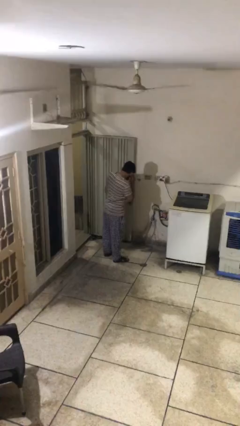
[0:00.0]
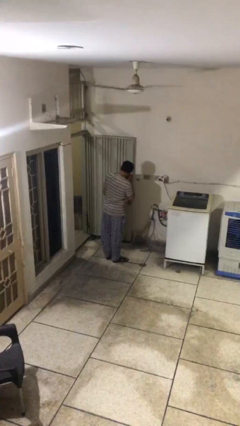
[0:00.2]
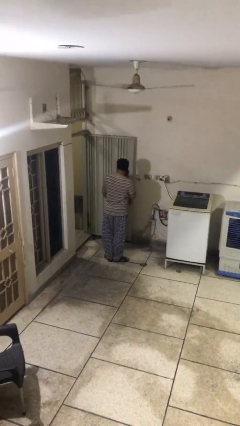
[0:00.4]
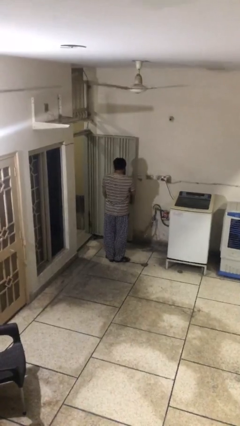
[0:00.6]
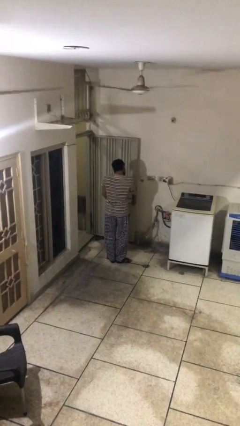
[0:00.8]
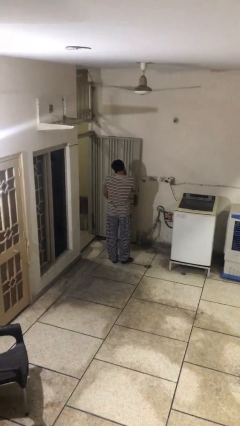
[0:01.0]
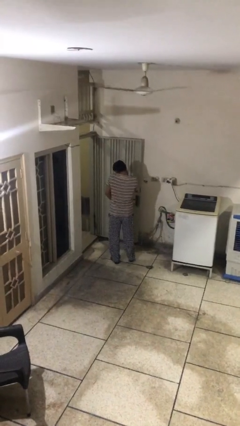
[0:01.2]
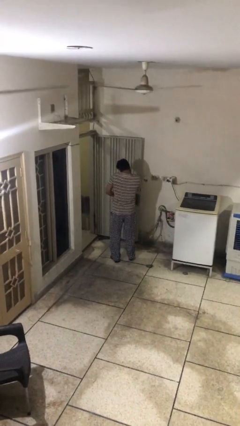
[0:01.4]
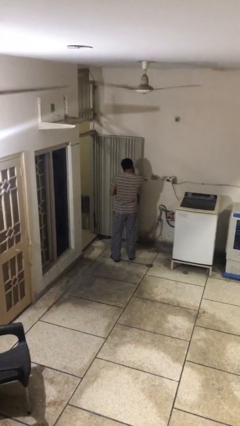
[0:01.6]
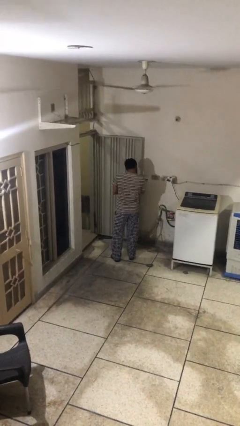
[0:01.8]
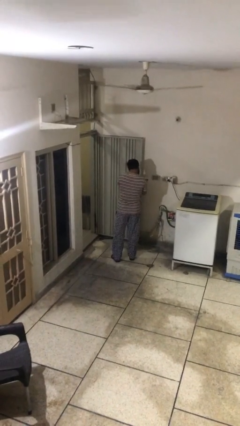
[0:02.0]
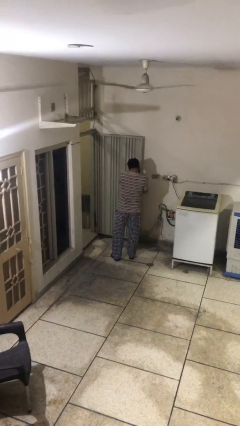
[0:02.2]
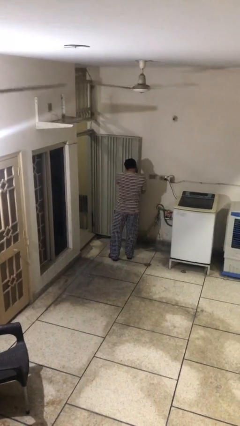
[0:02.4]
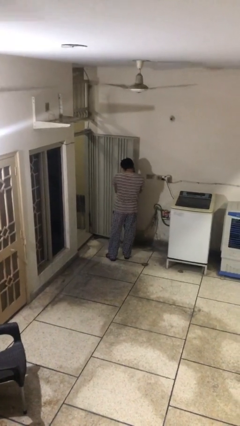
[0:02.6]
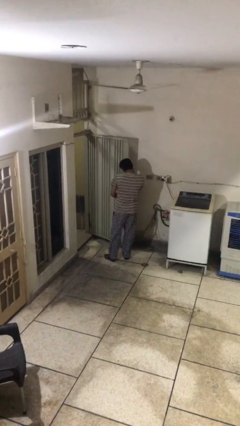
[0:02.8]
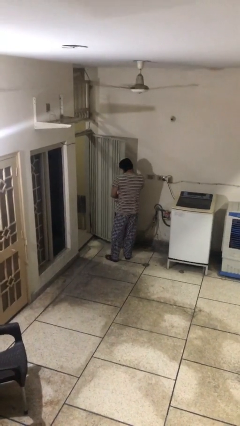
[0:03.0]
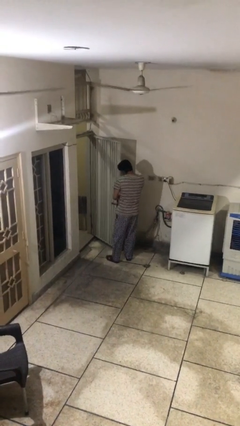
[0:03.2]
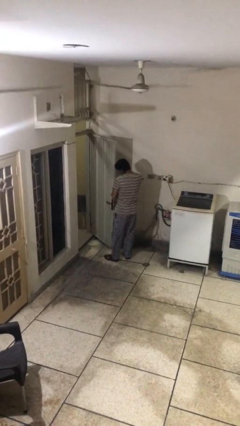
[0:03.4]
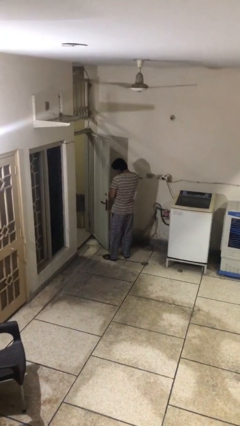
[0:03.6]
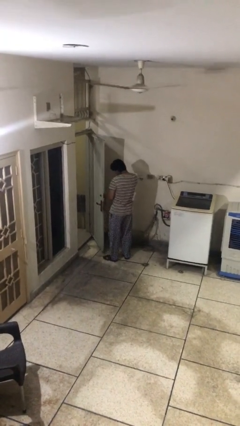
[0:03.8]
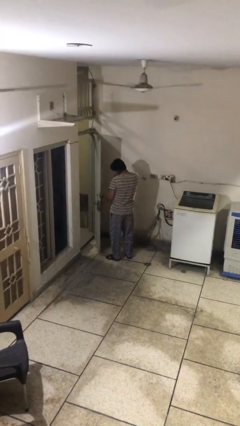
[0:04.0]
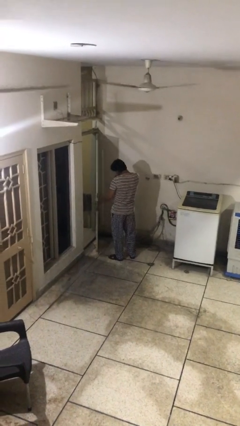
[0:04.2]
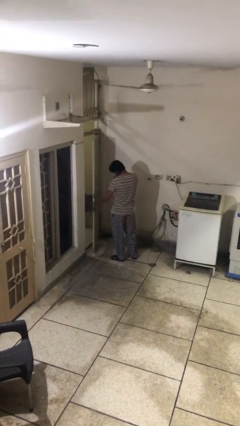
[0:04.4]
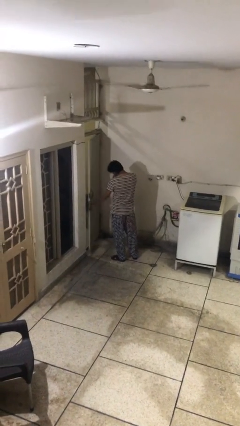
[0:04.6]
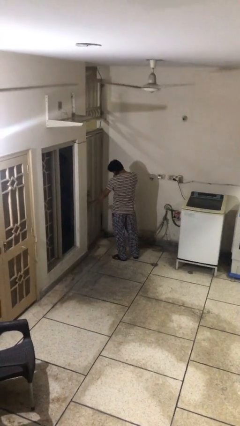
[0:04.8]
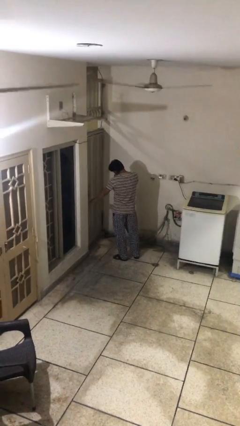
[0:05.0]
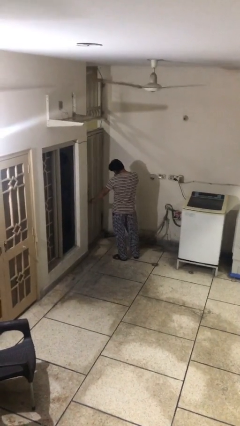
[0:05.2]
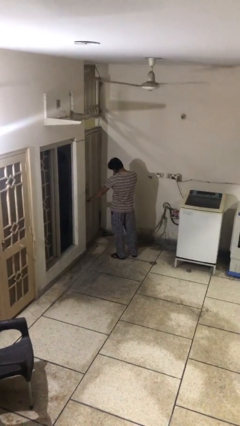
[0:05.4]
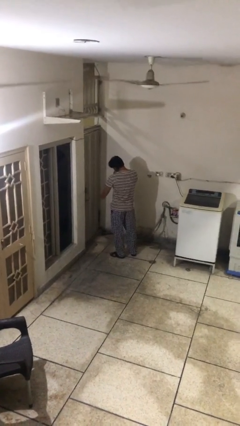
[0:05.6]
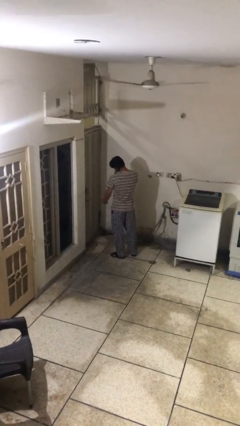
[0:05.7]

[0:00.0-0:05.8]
person closes facility door

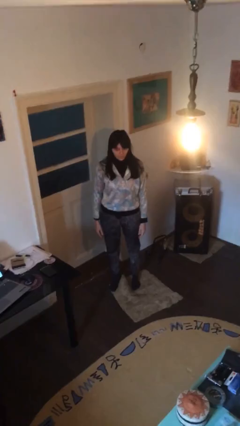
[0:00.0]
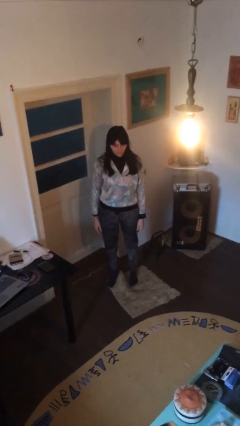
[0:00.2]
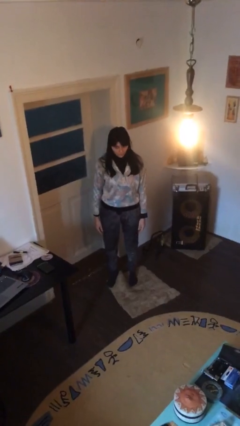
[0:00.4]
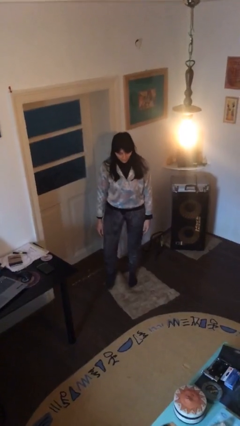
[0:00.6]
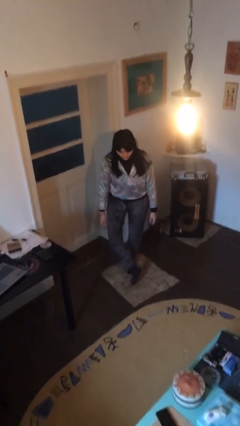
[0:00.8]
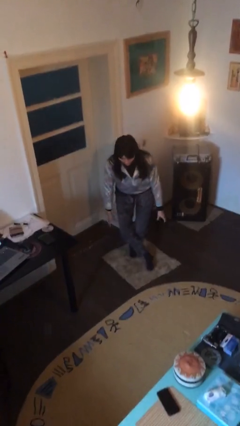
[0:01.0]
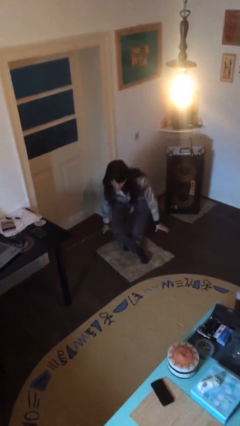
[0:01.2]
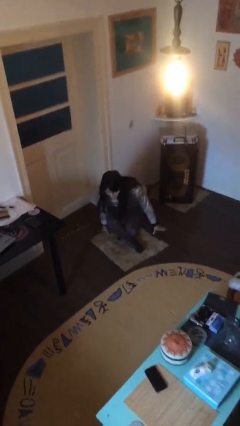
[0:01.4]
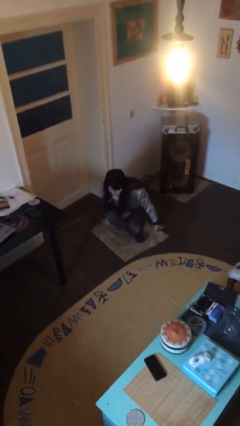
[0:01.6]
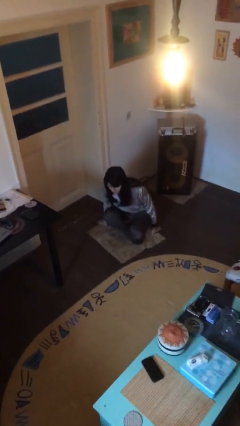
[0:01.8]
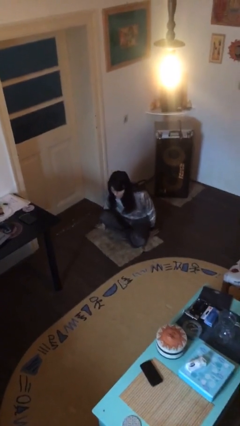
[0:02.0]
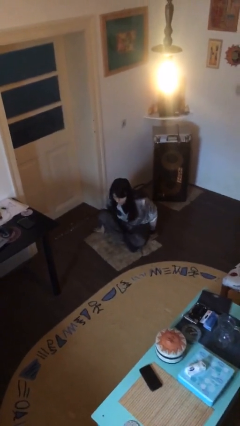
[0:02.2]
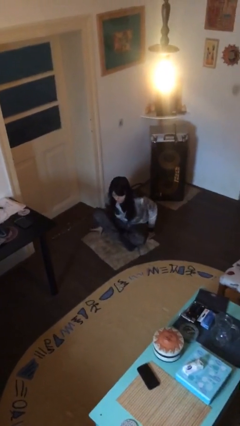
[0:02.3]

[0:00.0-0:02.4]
person sits down

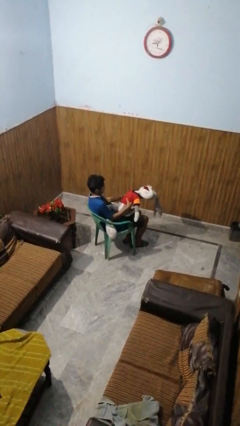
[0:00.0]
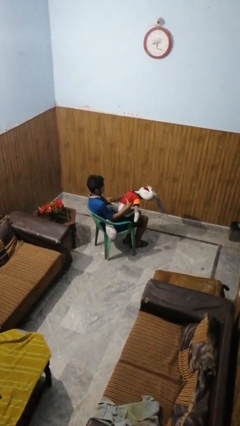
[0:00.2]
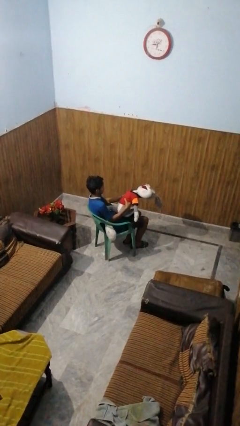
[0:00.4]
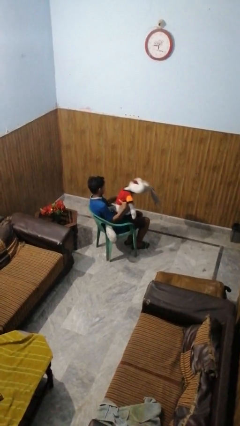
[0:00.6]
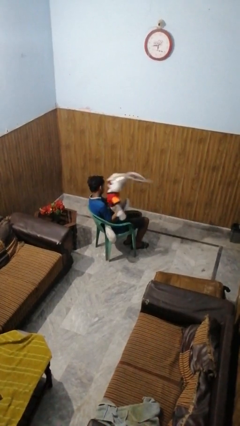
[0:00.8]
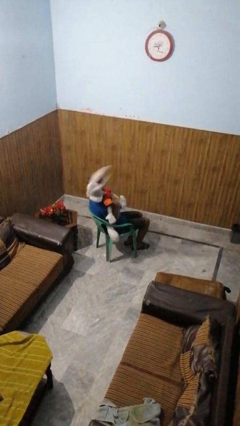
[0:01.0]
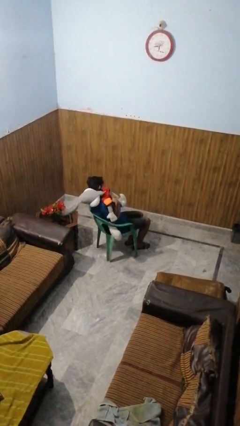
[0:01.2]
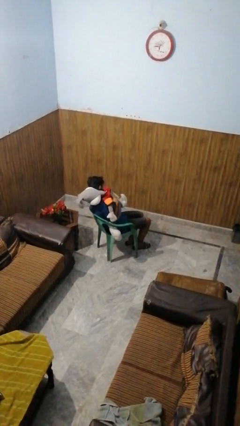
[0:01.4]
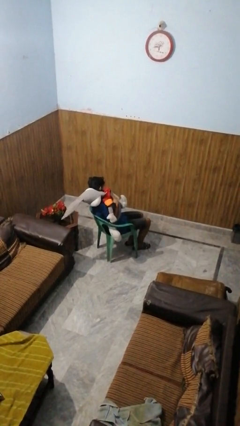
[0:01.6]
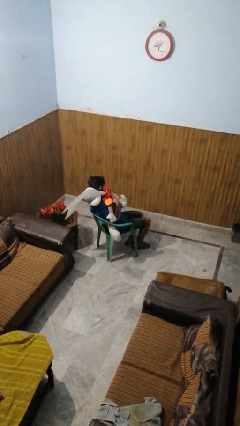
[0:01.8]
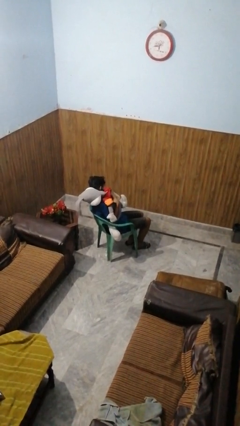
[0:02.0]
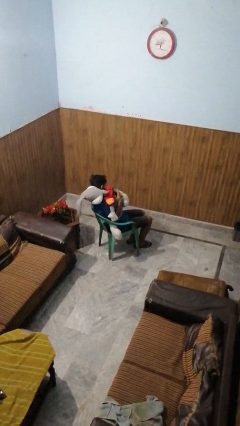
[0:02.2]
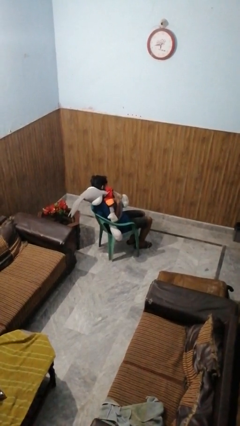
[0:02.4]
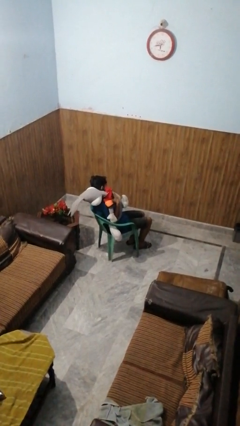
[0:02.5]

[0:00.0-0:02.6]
person hugs stuffed animal

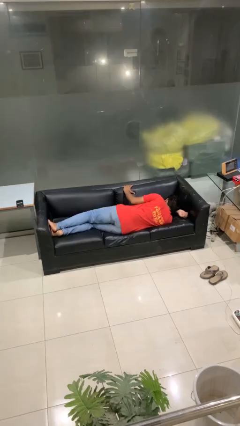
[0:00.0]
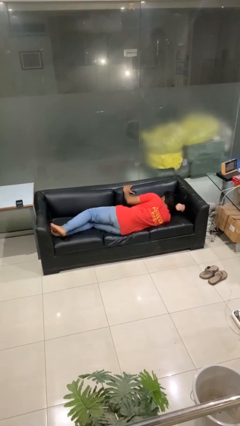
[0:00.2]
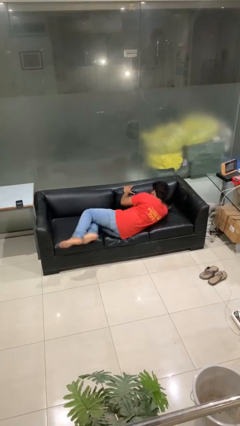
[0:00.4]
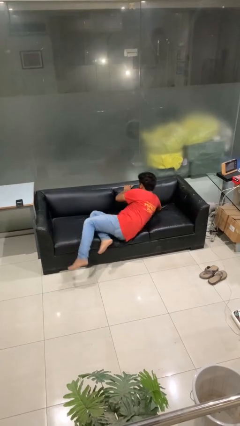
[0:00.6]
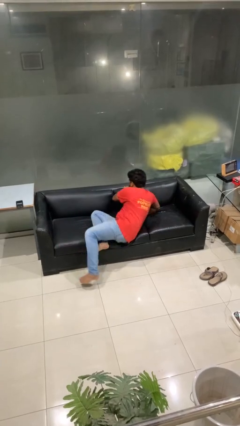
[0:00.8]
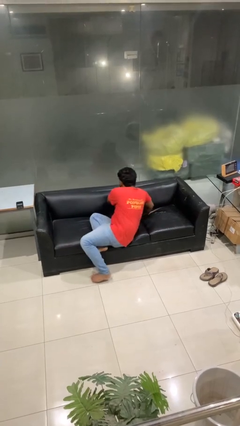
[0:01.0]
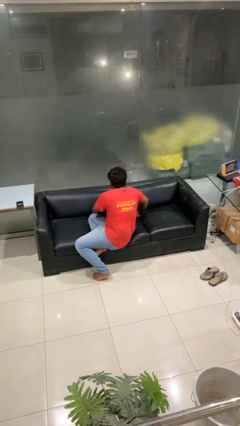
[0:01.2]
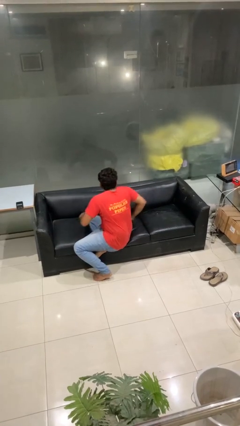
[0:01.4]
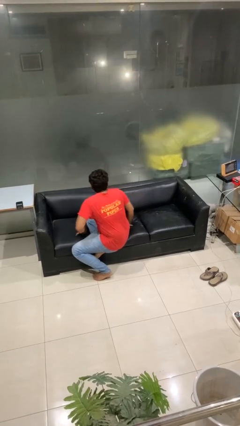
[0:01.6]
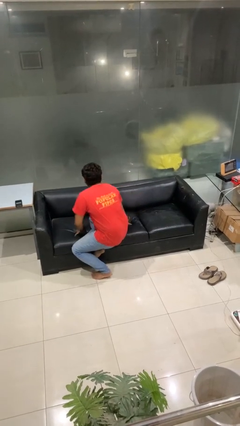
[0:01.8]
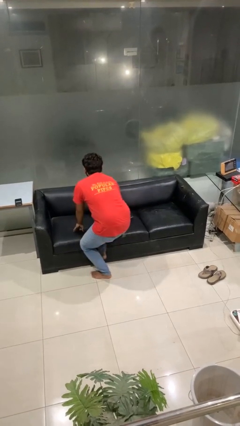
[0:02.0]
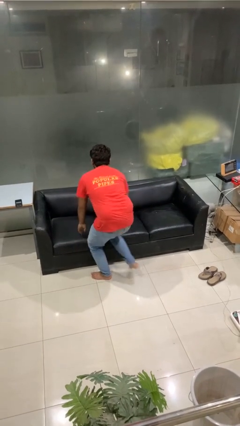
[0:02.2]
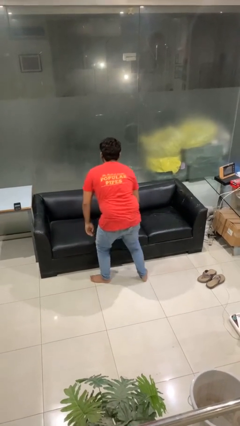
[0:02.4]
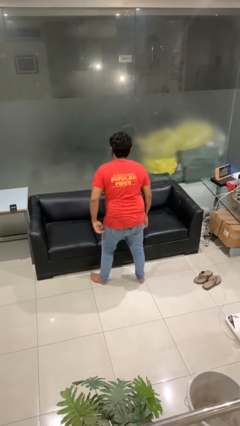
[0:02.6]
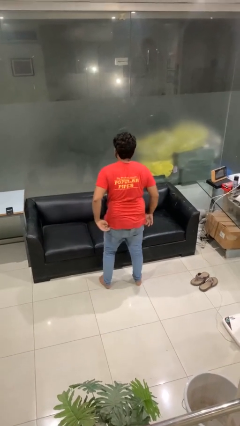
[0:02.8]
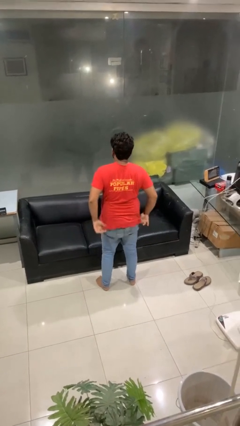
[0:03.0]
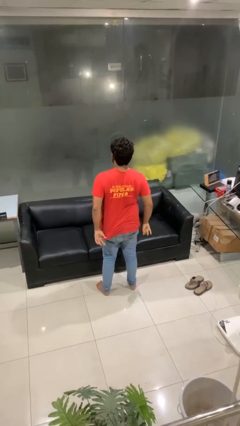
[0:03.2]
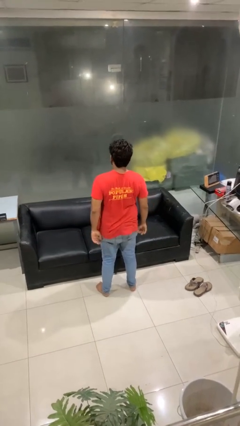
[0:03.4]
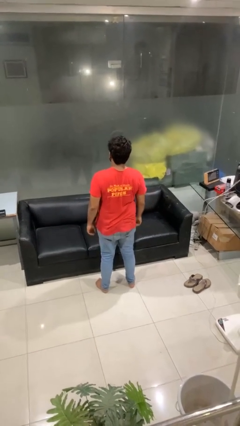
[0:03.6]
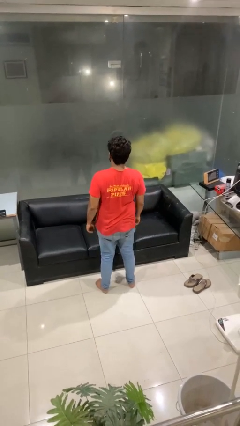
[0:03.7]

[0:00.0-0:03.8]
person stands up

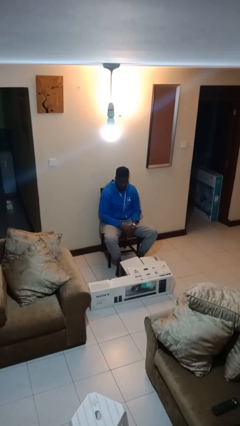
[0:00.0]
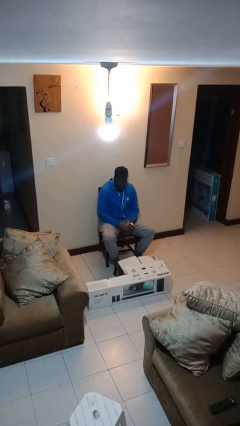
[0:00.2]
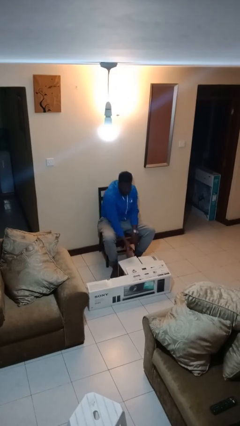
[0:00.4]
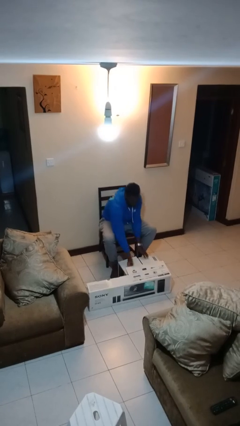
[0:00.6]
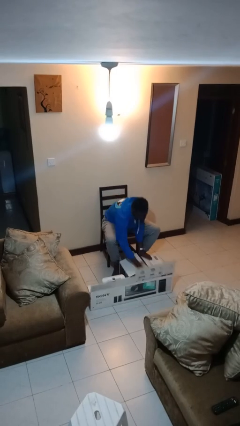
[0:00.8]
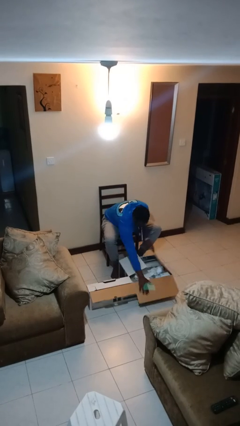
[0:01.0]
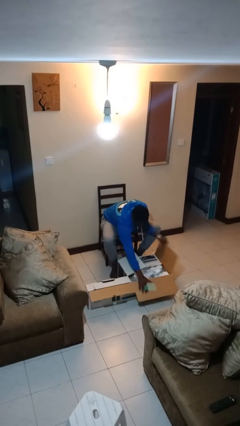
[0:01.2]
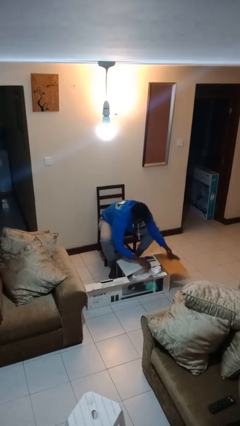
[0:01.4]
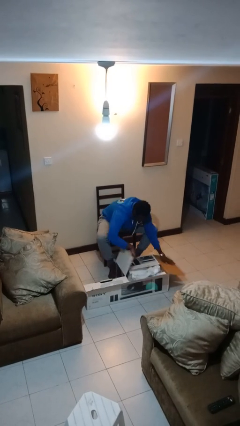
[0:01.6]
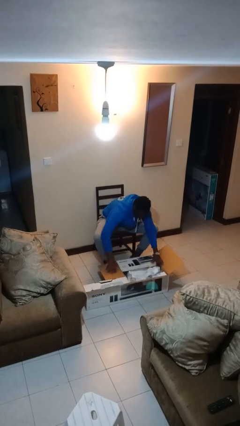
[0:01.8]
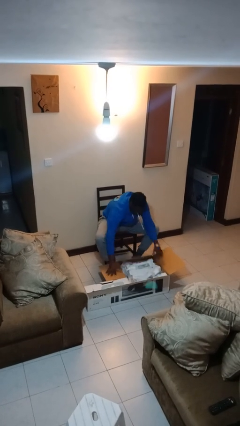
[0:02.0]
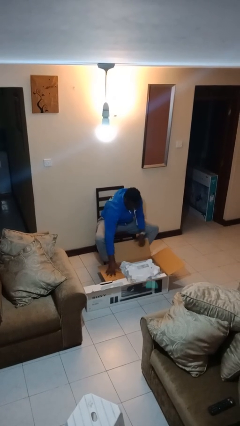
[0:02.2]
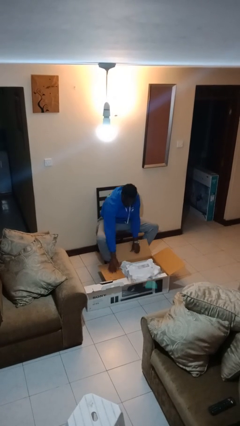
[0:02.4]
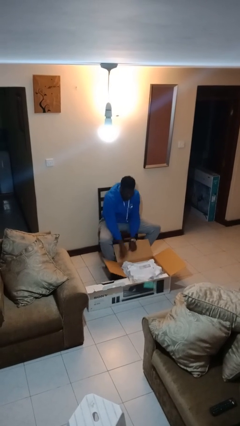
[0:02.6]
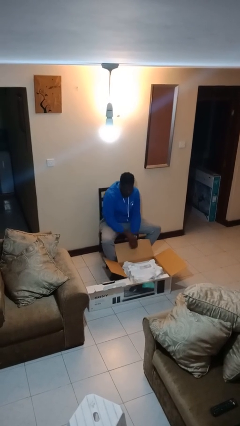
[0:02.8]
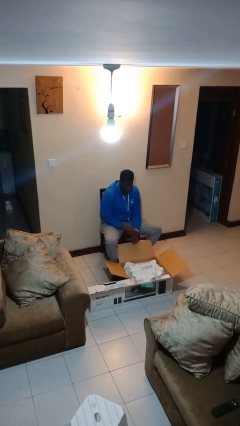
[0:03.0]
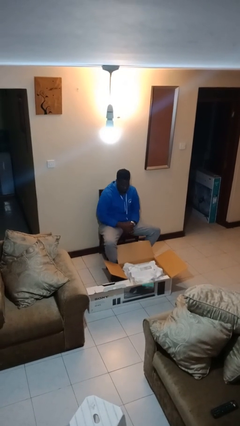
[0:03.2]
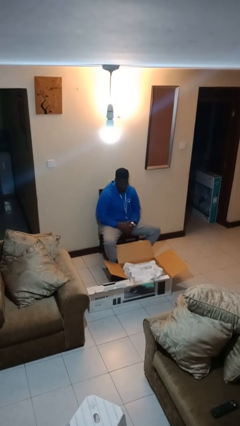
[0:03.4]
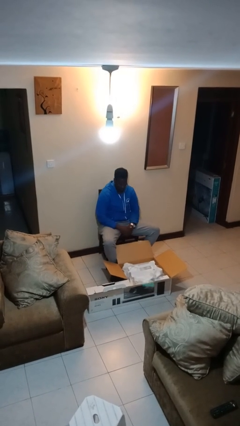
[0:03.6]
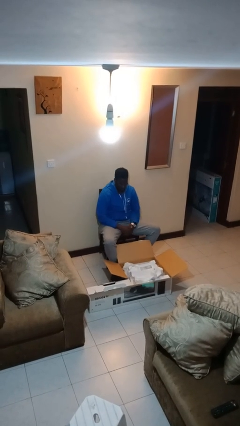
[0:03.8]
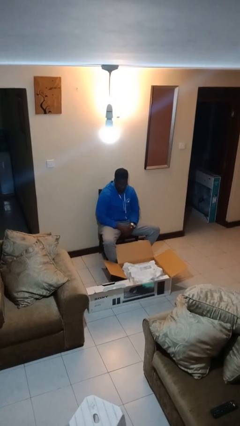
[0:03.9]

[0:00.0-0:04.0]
person opens box
